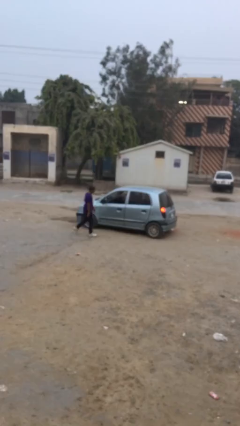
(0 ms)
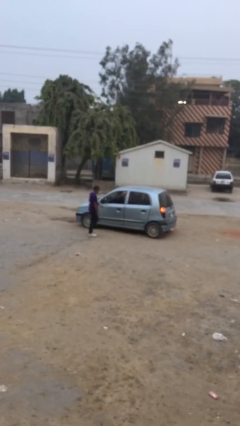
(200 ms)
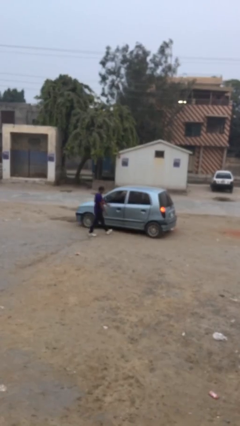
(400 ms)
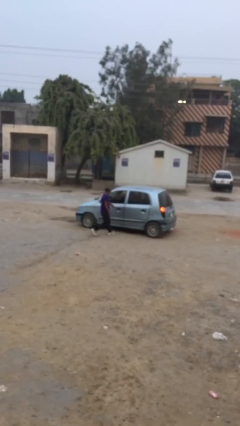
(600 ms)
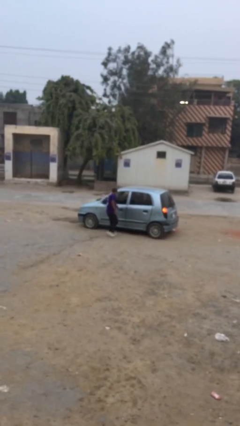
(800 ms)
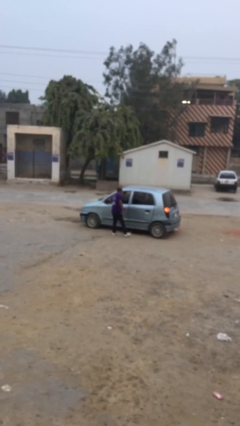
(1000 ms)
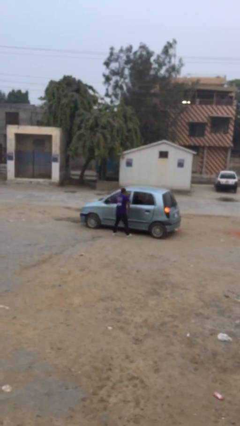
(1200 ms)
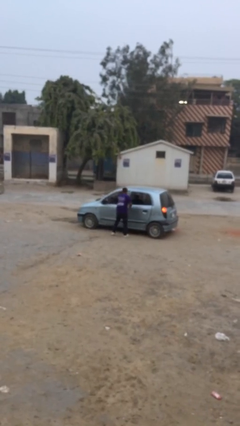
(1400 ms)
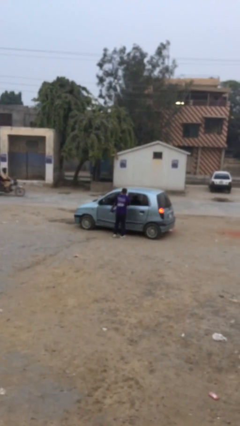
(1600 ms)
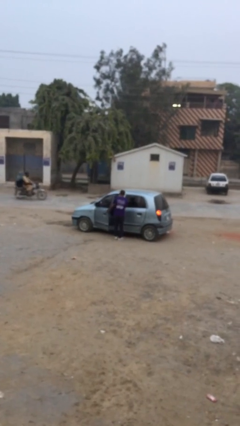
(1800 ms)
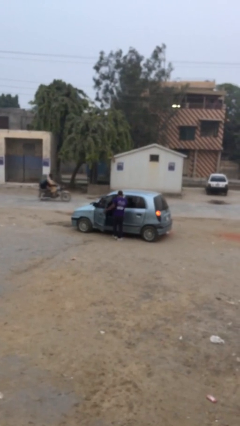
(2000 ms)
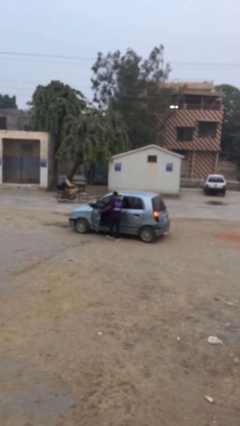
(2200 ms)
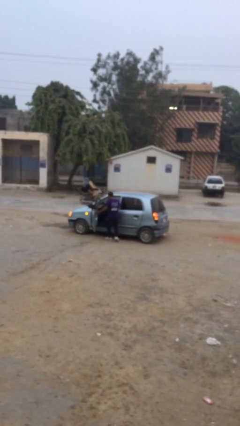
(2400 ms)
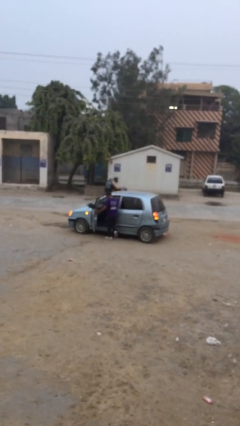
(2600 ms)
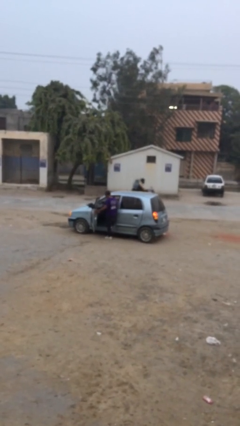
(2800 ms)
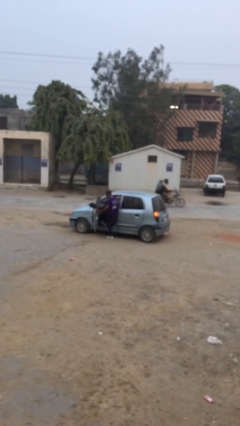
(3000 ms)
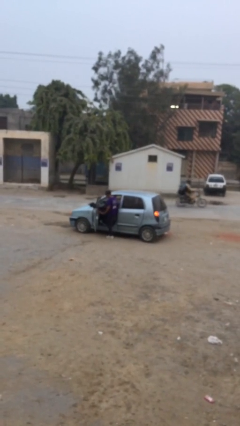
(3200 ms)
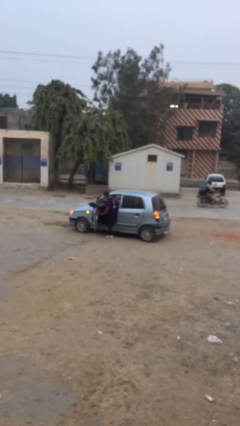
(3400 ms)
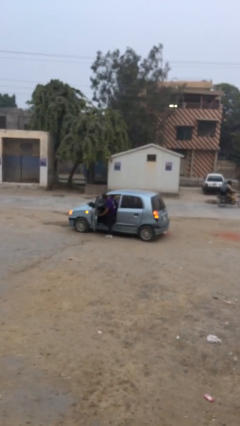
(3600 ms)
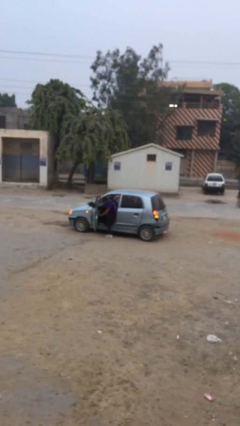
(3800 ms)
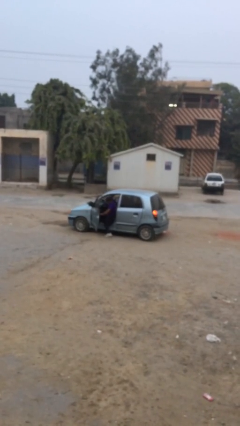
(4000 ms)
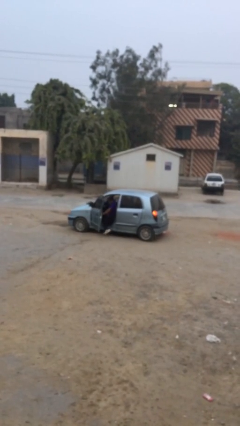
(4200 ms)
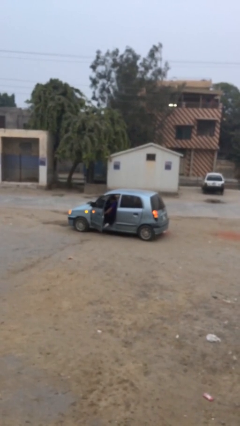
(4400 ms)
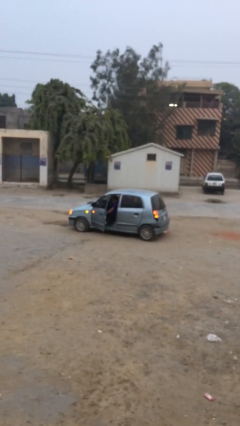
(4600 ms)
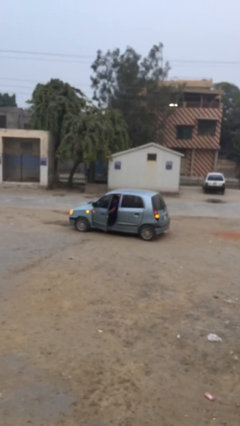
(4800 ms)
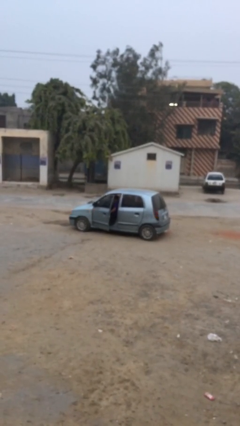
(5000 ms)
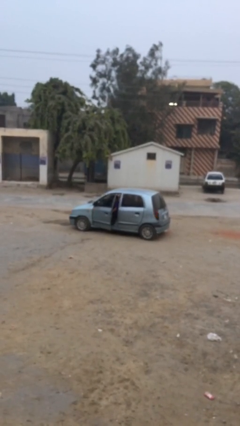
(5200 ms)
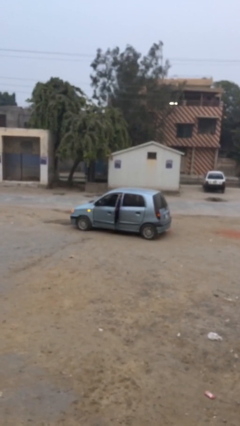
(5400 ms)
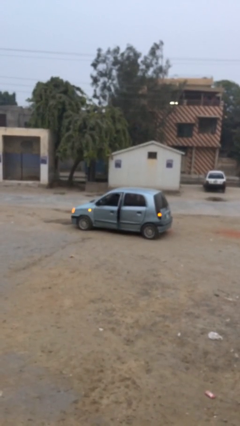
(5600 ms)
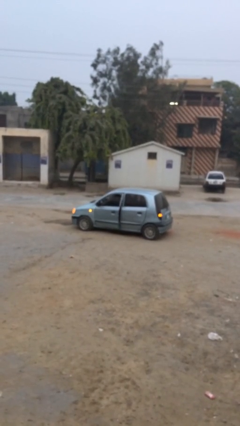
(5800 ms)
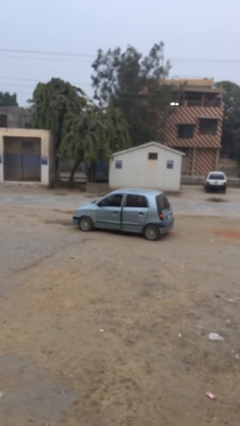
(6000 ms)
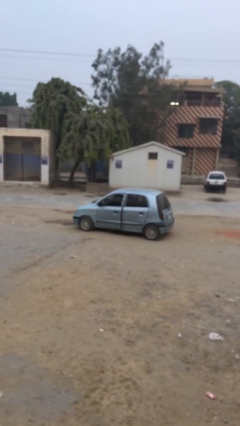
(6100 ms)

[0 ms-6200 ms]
car picks up person

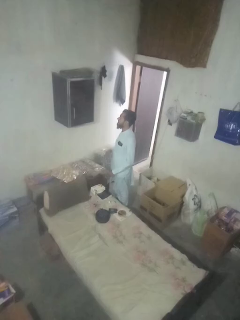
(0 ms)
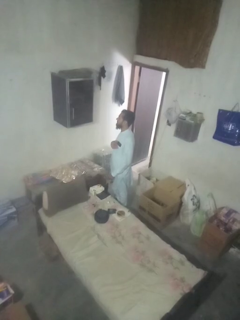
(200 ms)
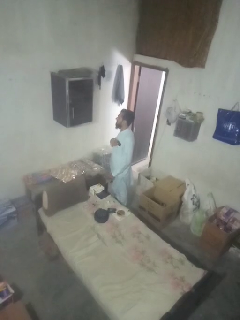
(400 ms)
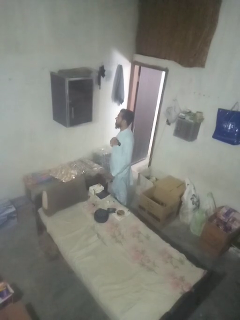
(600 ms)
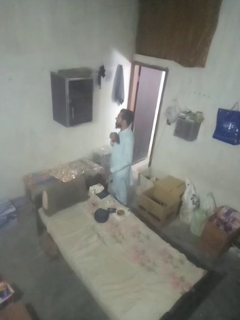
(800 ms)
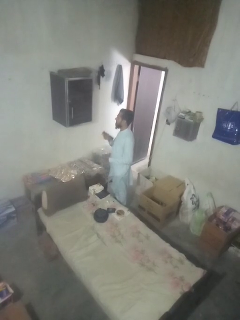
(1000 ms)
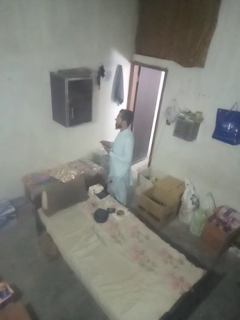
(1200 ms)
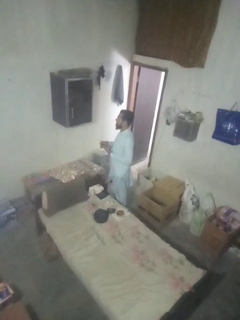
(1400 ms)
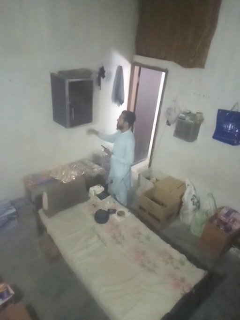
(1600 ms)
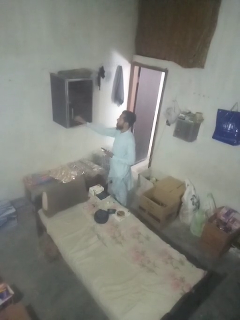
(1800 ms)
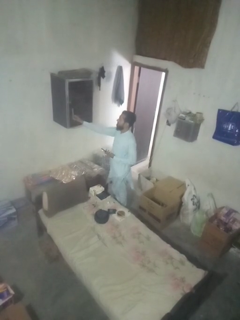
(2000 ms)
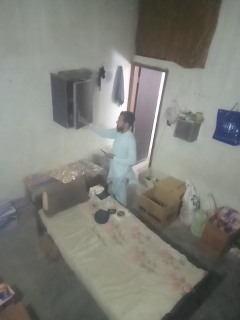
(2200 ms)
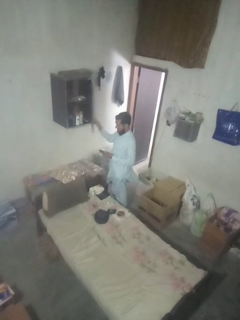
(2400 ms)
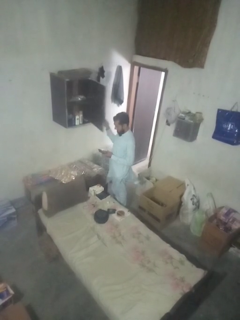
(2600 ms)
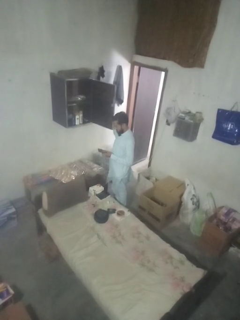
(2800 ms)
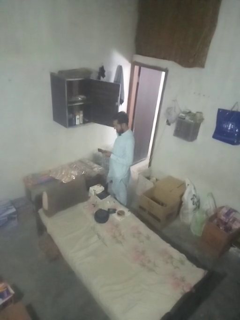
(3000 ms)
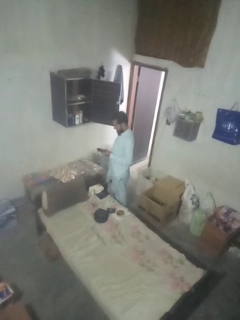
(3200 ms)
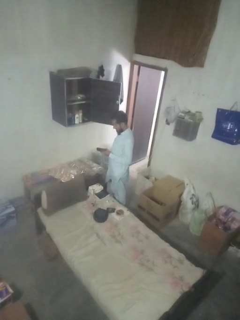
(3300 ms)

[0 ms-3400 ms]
person opens dresser drawer

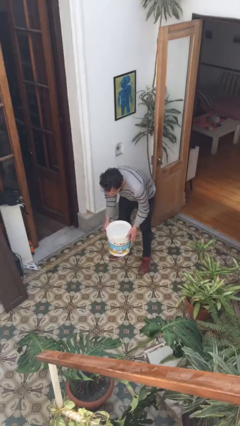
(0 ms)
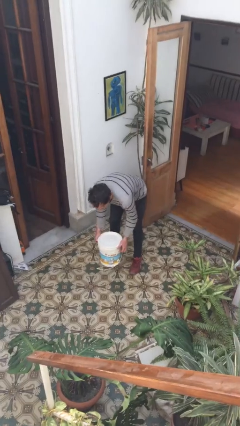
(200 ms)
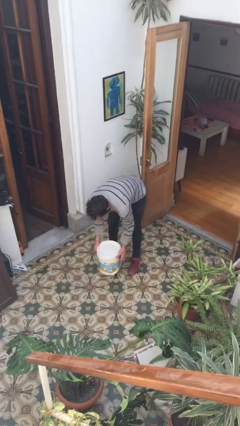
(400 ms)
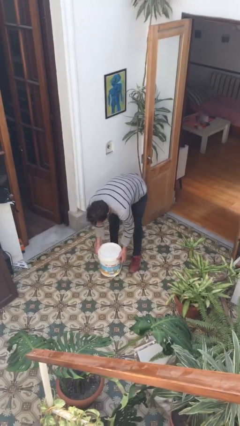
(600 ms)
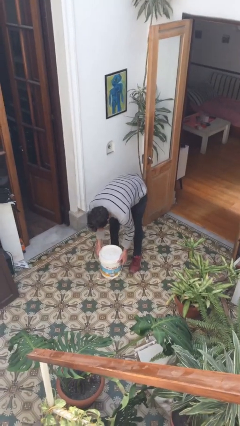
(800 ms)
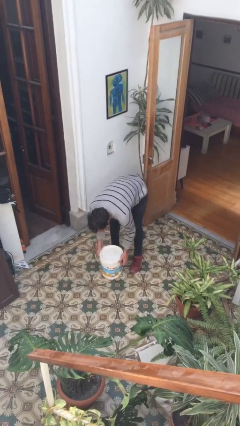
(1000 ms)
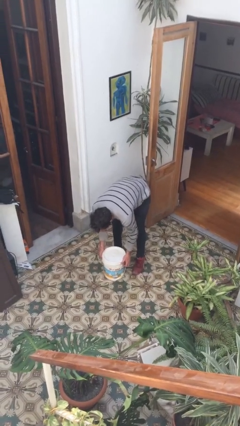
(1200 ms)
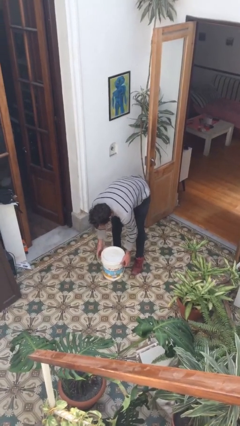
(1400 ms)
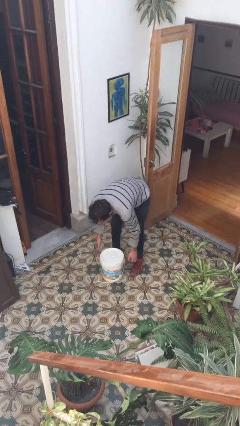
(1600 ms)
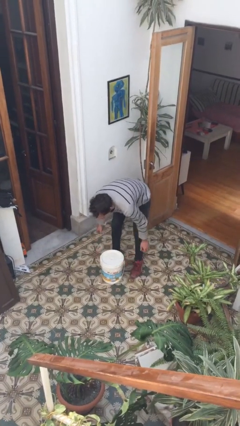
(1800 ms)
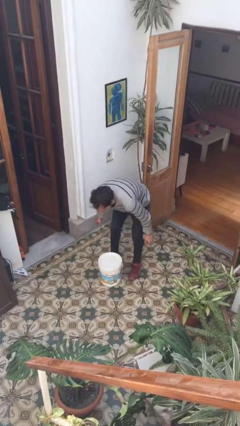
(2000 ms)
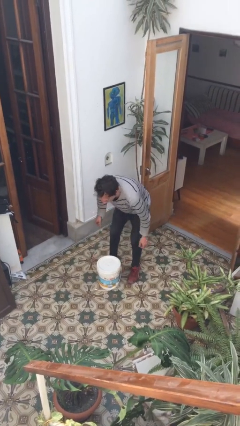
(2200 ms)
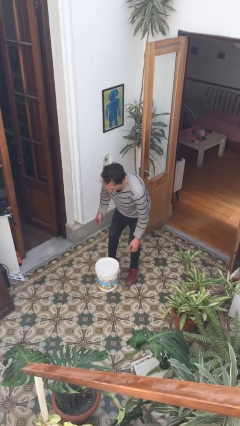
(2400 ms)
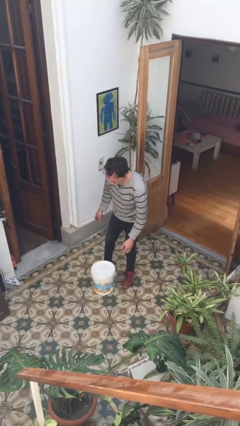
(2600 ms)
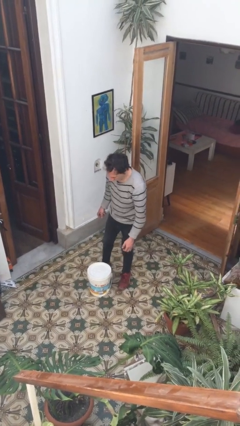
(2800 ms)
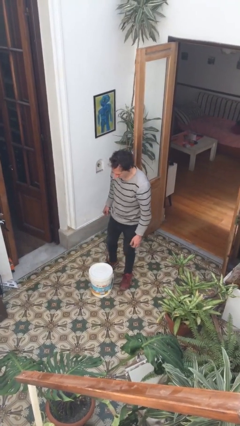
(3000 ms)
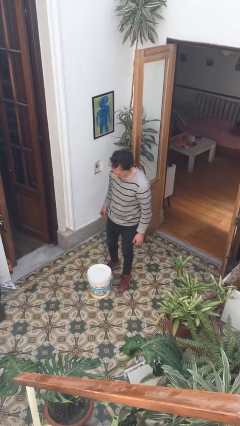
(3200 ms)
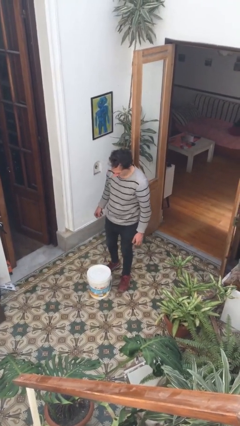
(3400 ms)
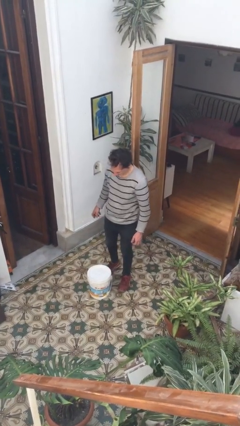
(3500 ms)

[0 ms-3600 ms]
person puts down object on floor

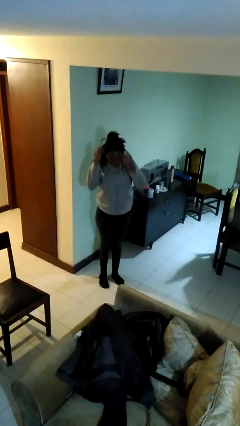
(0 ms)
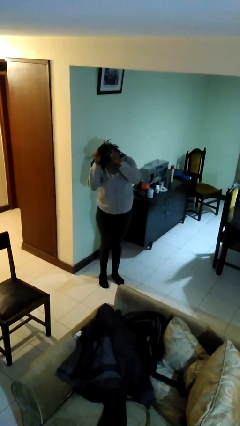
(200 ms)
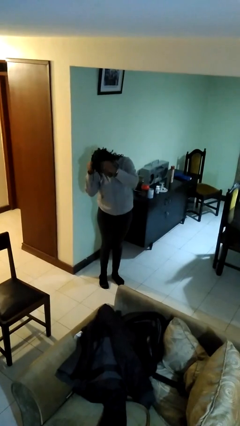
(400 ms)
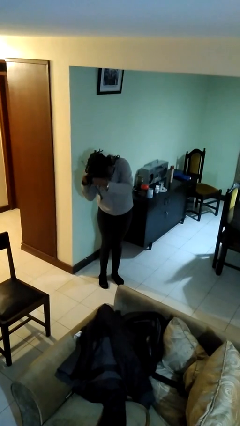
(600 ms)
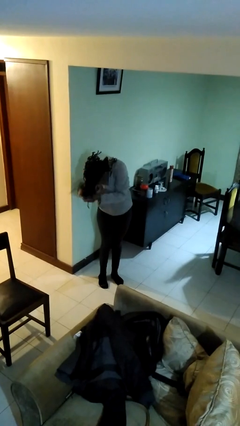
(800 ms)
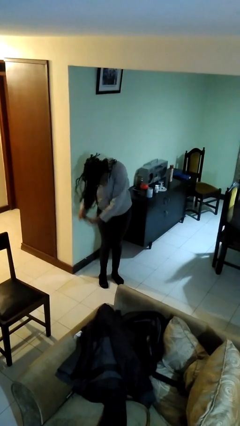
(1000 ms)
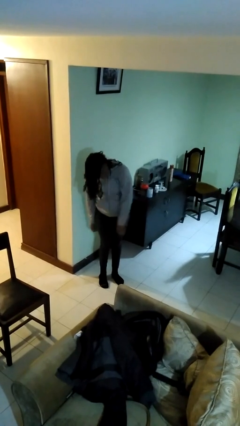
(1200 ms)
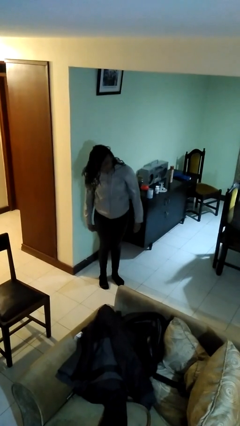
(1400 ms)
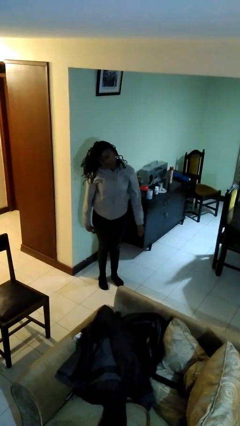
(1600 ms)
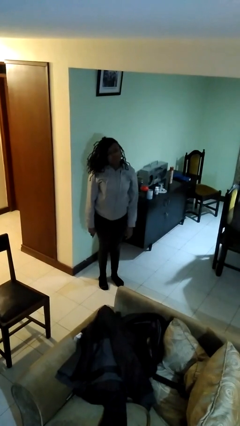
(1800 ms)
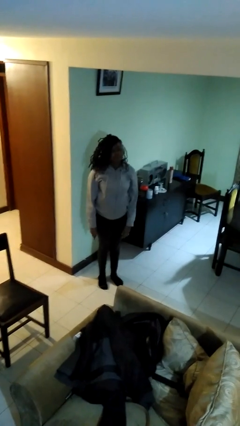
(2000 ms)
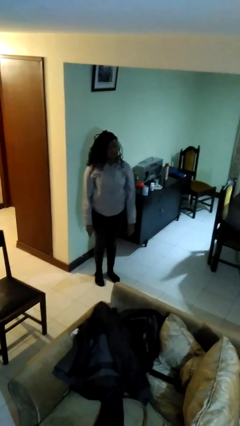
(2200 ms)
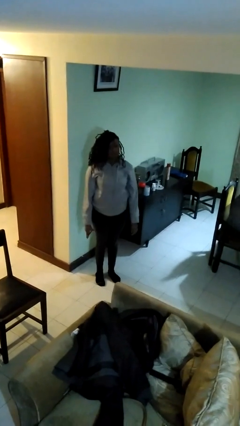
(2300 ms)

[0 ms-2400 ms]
person takes off hairtie

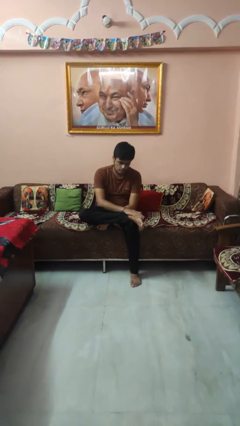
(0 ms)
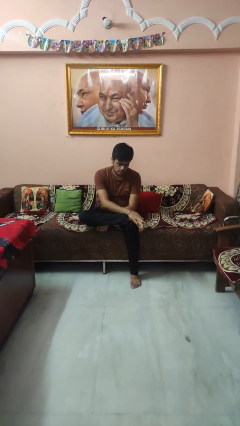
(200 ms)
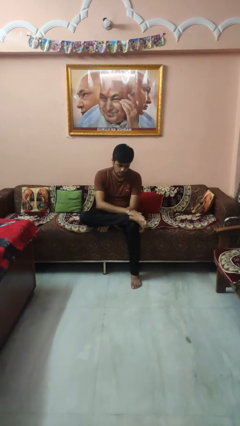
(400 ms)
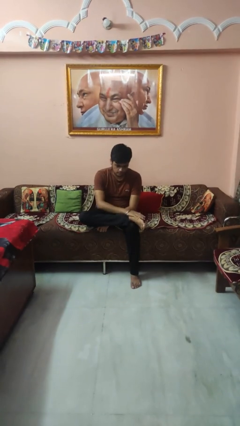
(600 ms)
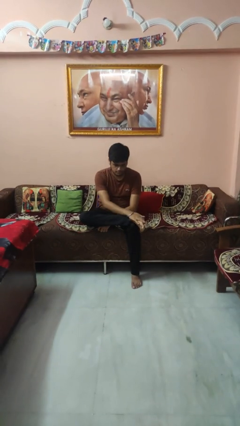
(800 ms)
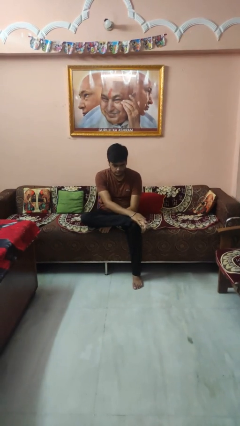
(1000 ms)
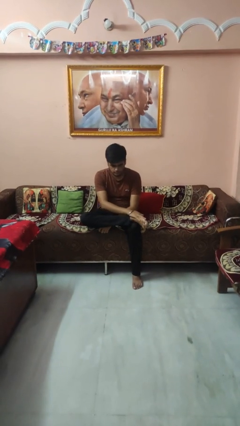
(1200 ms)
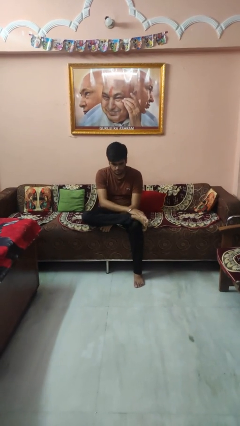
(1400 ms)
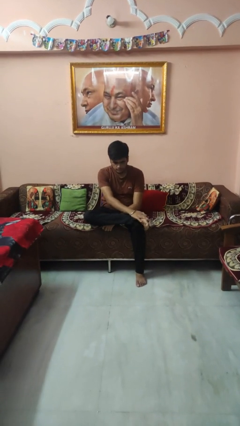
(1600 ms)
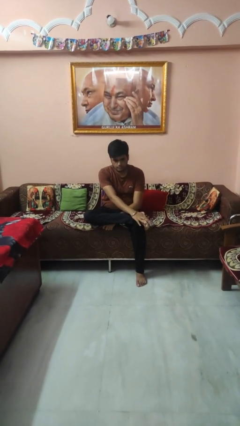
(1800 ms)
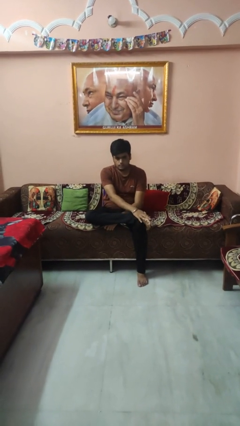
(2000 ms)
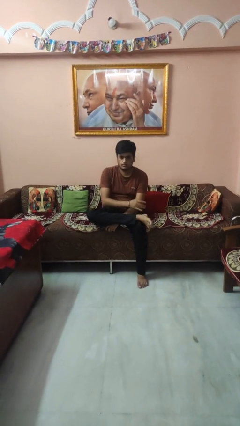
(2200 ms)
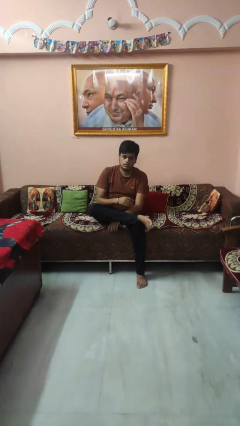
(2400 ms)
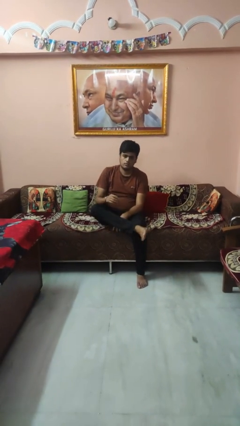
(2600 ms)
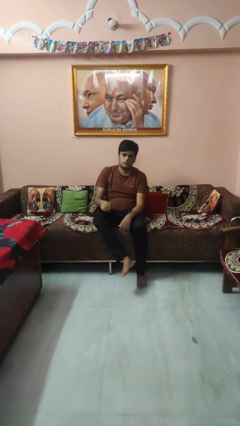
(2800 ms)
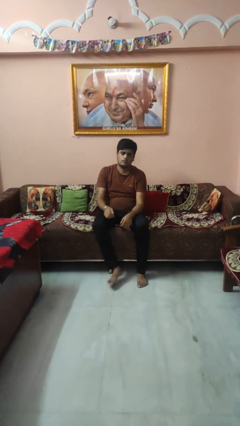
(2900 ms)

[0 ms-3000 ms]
person rubs foot
